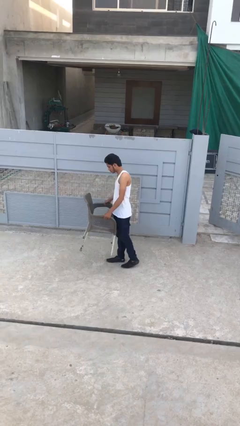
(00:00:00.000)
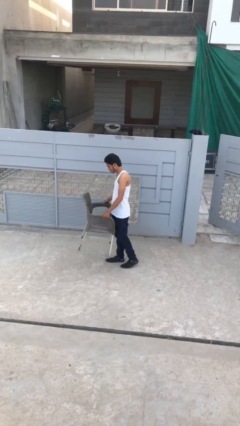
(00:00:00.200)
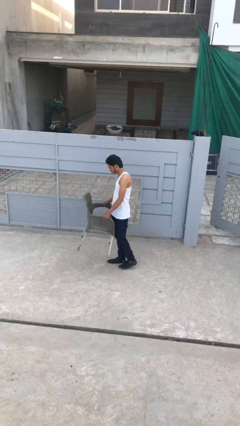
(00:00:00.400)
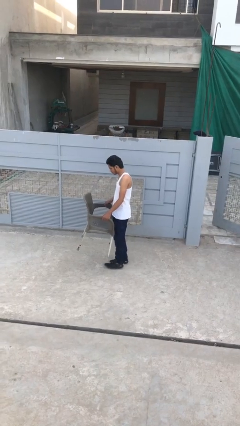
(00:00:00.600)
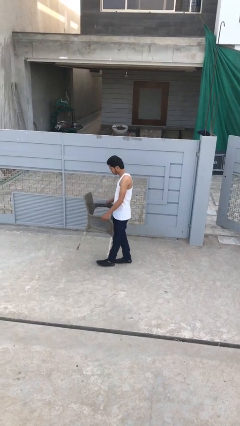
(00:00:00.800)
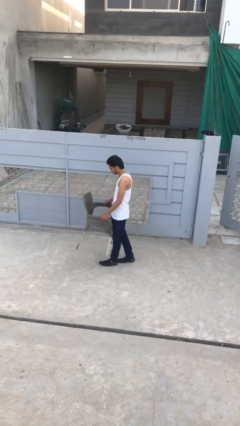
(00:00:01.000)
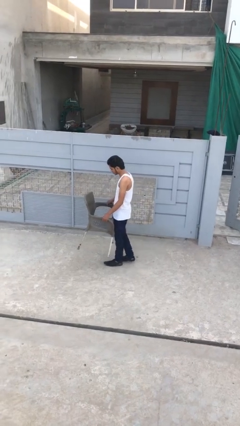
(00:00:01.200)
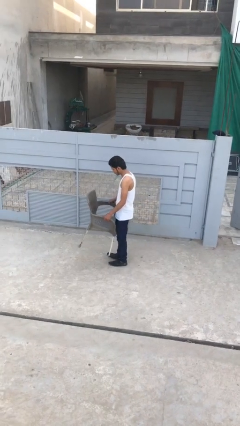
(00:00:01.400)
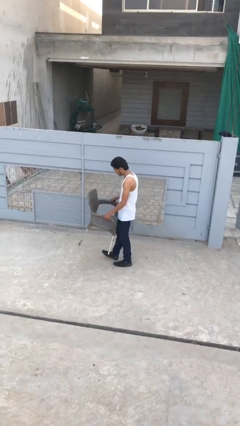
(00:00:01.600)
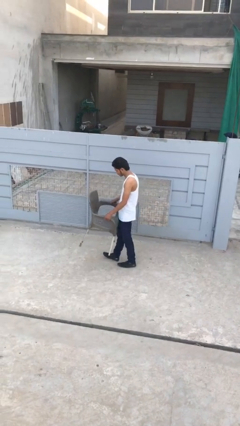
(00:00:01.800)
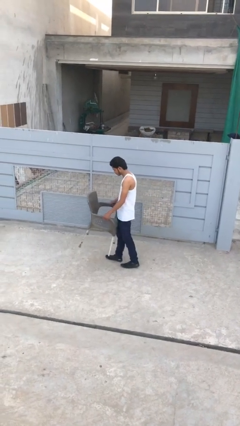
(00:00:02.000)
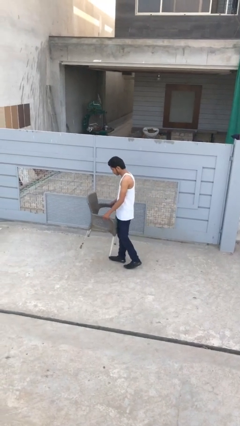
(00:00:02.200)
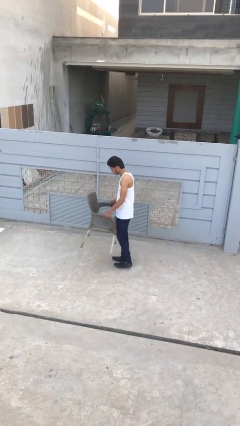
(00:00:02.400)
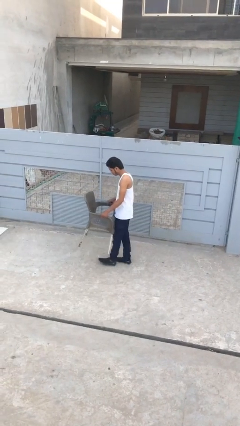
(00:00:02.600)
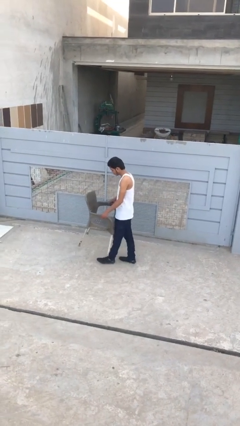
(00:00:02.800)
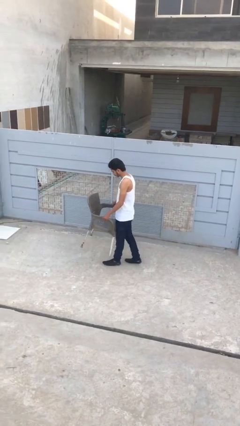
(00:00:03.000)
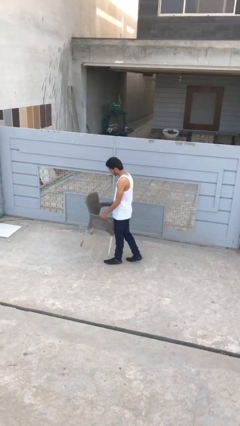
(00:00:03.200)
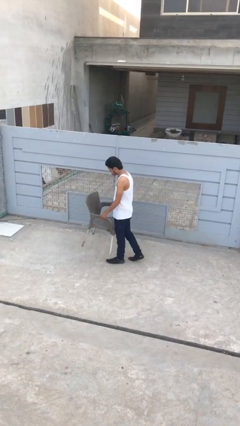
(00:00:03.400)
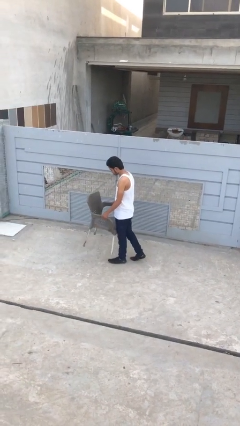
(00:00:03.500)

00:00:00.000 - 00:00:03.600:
person carries heavy object

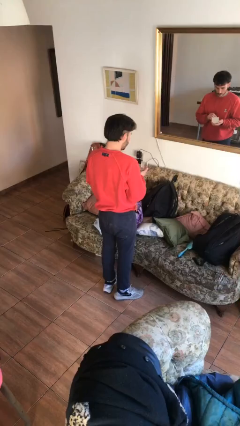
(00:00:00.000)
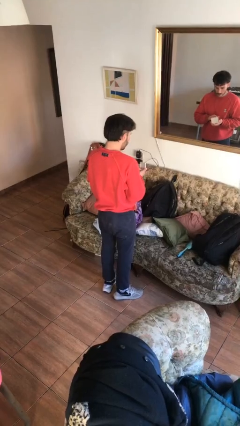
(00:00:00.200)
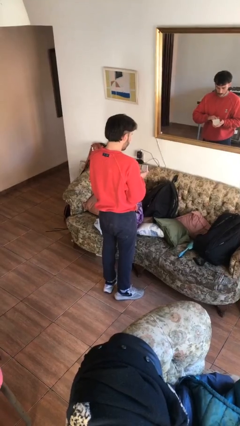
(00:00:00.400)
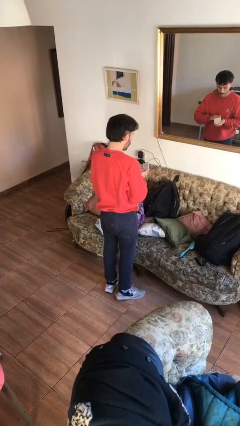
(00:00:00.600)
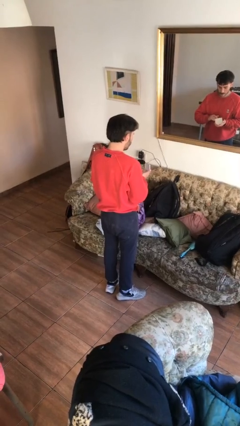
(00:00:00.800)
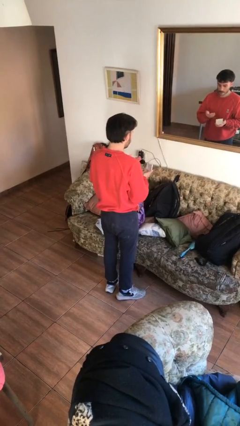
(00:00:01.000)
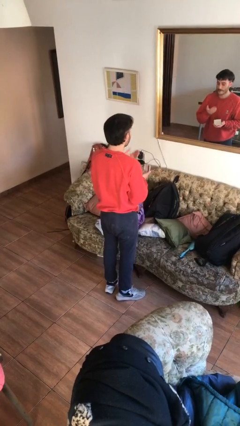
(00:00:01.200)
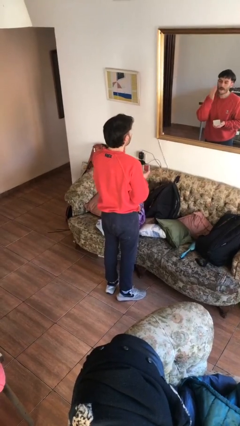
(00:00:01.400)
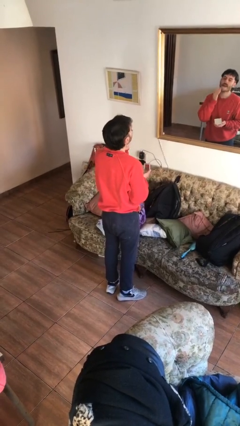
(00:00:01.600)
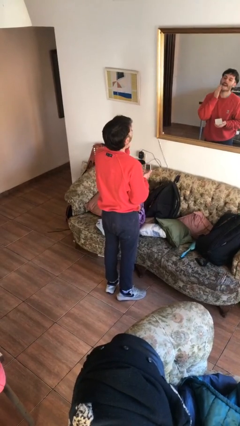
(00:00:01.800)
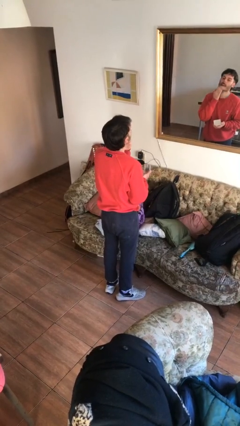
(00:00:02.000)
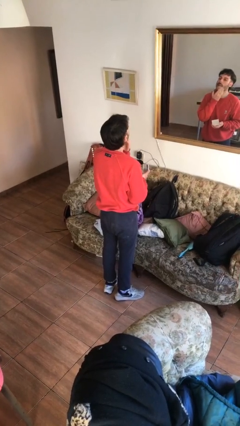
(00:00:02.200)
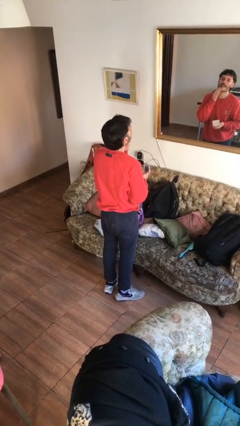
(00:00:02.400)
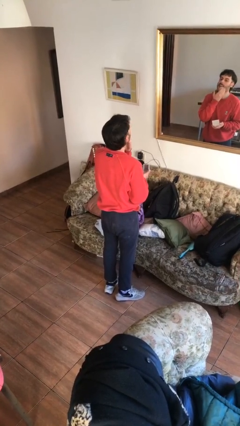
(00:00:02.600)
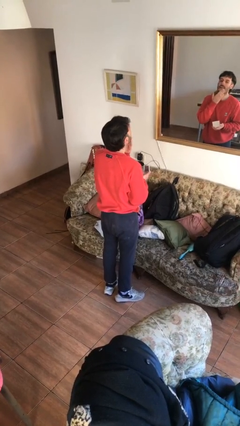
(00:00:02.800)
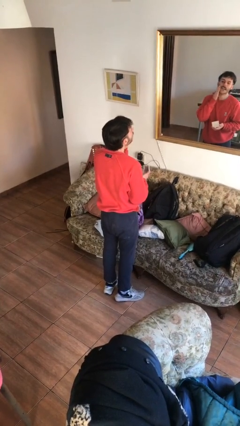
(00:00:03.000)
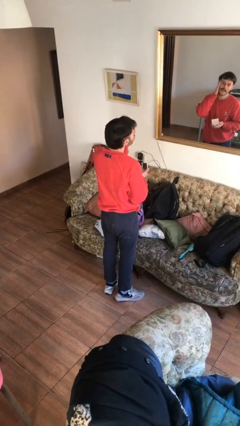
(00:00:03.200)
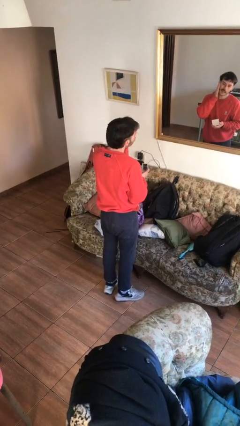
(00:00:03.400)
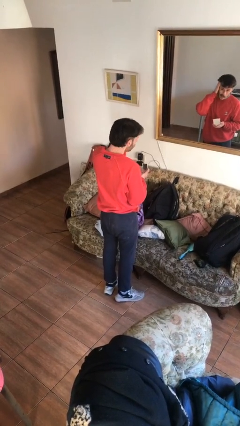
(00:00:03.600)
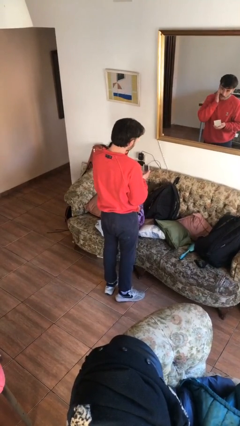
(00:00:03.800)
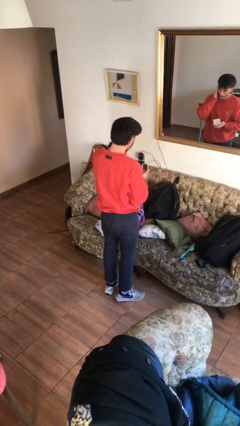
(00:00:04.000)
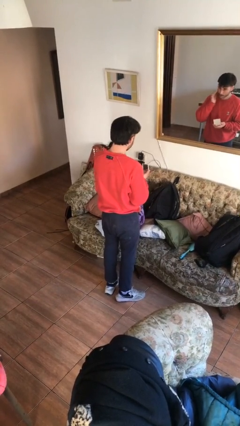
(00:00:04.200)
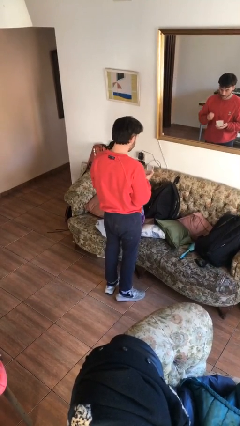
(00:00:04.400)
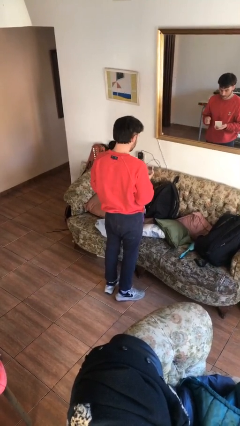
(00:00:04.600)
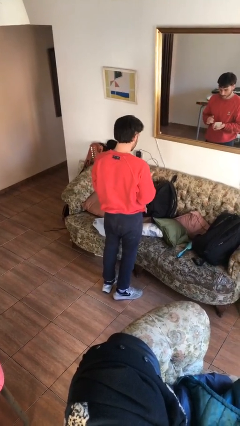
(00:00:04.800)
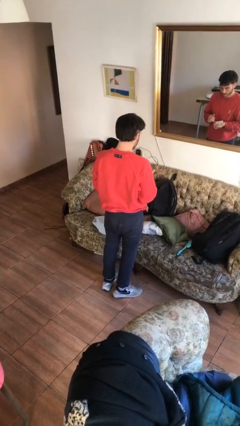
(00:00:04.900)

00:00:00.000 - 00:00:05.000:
person applies foundation makeup

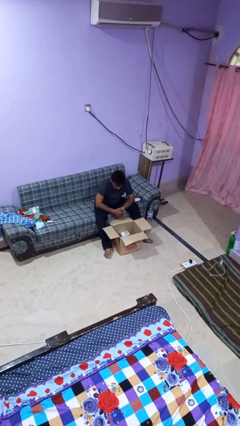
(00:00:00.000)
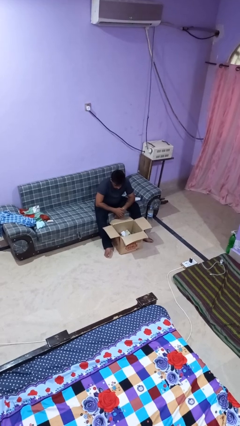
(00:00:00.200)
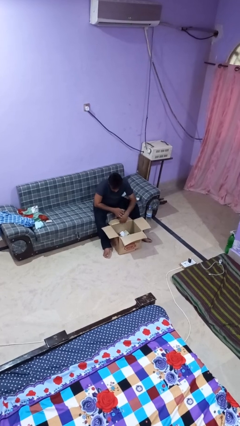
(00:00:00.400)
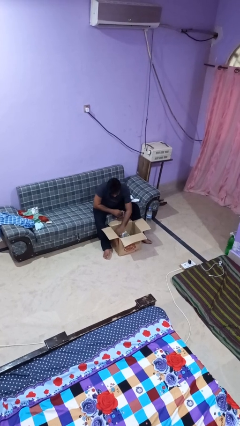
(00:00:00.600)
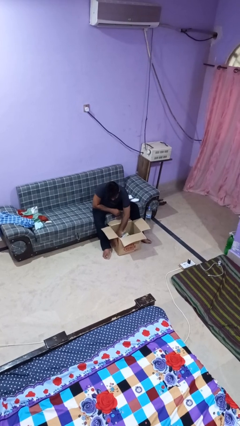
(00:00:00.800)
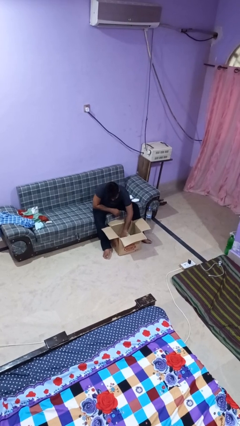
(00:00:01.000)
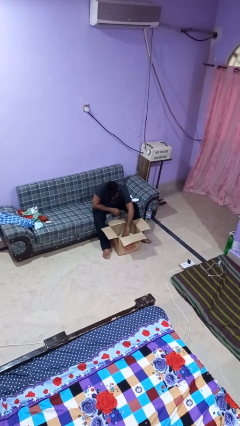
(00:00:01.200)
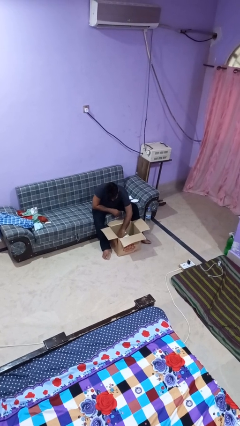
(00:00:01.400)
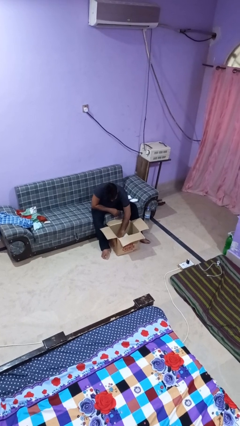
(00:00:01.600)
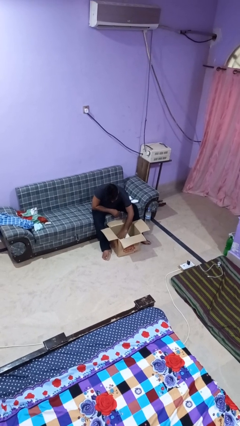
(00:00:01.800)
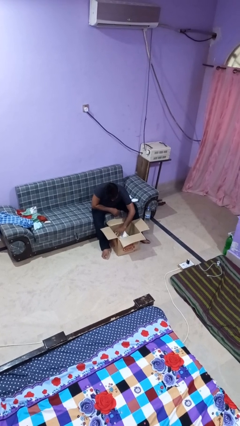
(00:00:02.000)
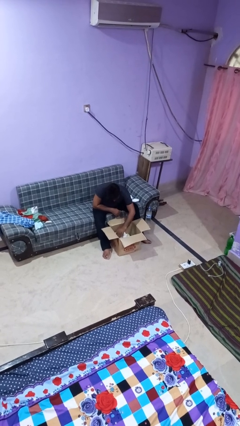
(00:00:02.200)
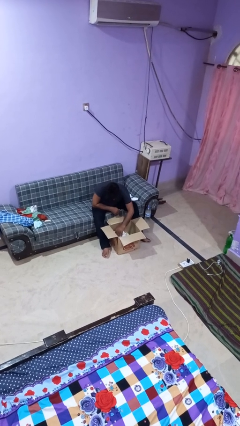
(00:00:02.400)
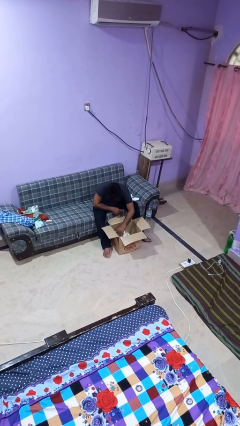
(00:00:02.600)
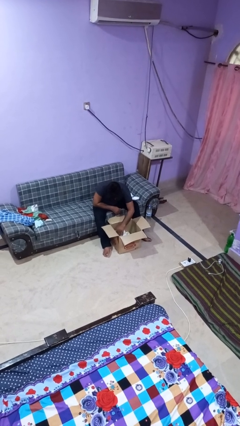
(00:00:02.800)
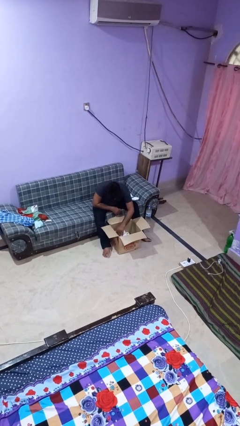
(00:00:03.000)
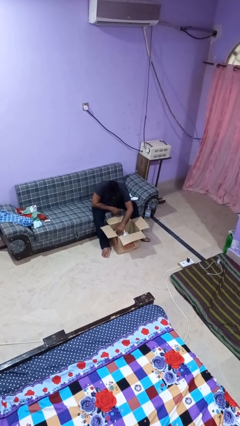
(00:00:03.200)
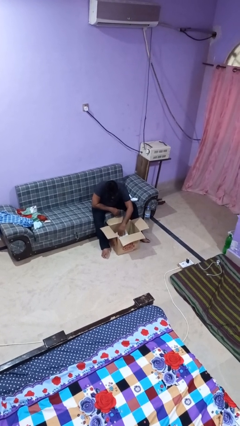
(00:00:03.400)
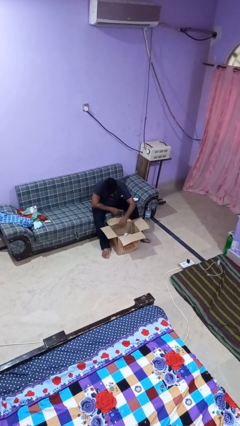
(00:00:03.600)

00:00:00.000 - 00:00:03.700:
person searches in box

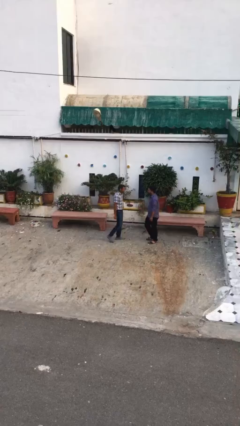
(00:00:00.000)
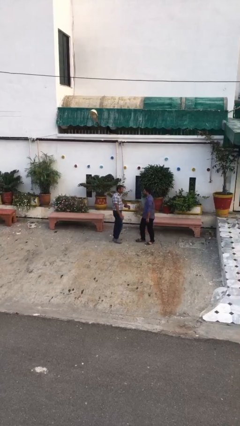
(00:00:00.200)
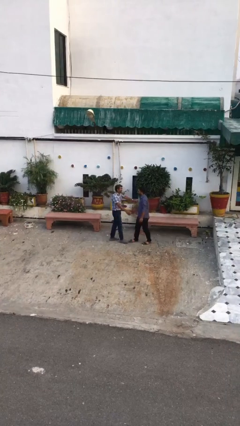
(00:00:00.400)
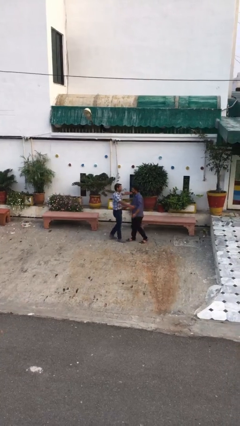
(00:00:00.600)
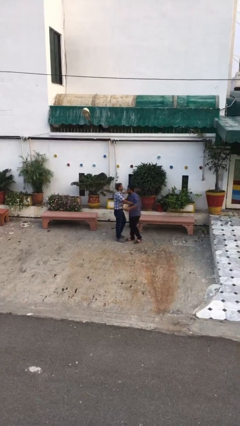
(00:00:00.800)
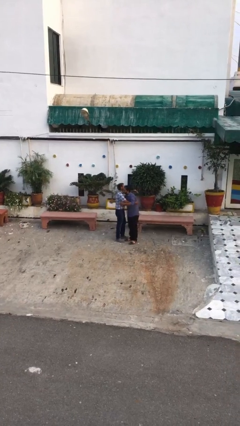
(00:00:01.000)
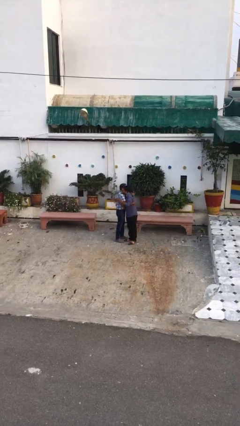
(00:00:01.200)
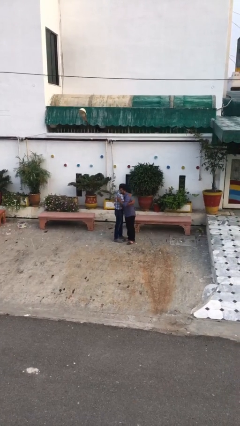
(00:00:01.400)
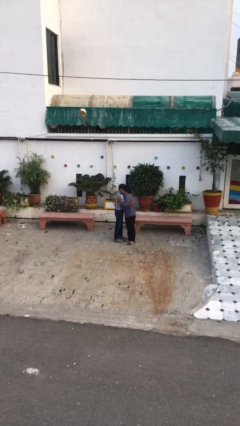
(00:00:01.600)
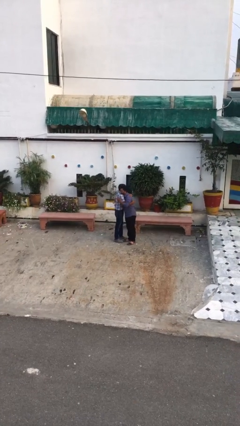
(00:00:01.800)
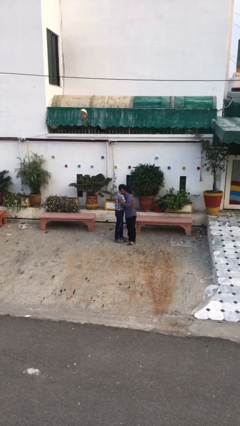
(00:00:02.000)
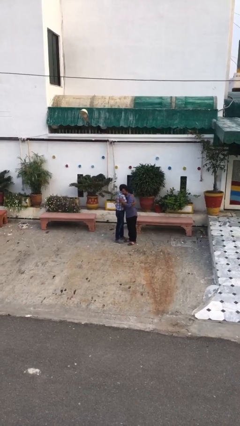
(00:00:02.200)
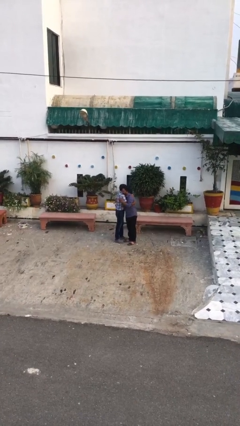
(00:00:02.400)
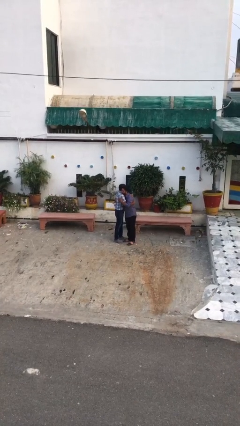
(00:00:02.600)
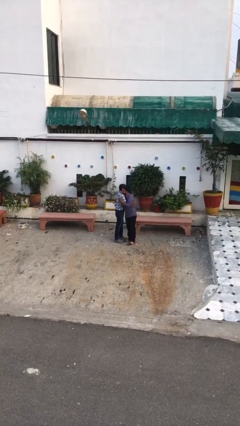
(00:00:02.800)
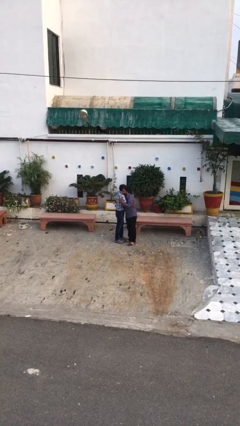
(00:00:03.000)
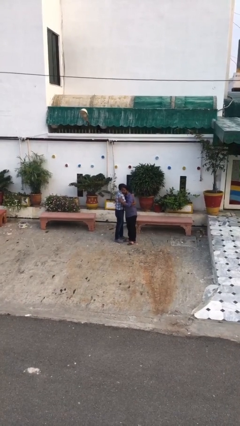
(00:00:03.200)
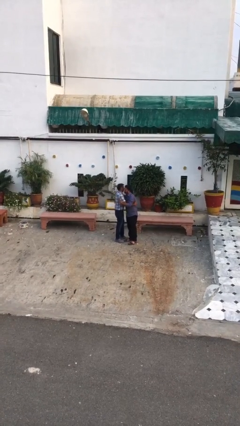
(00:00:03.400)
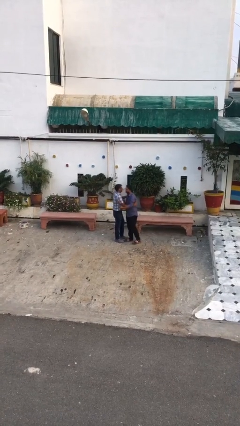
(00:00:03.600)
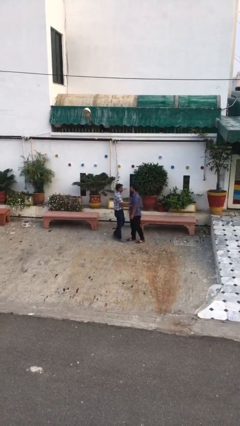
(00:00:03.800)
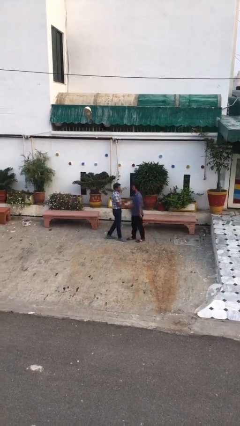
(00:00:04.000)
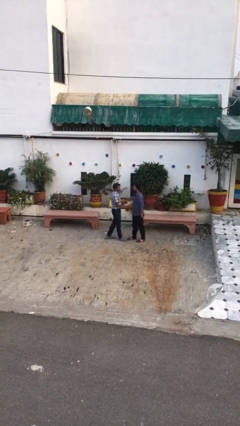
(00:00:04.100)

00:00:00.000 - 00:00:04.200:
person embraces person

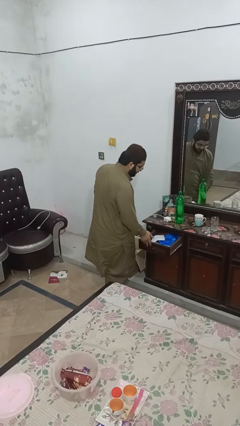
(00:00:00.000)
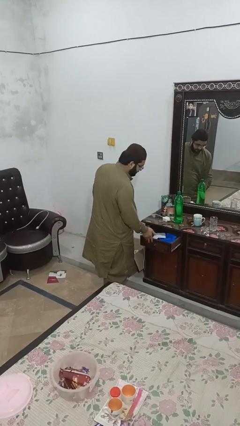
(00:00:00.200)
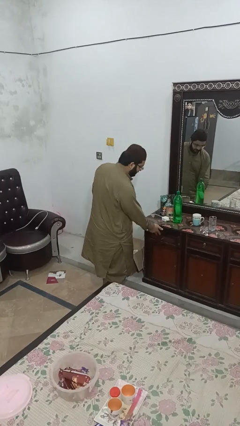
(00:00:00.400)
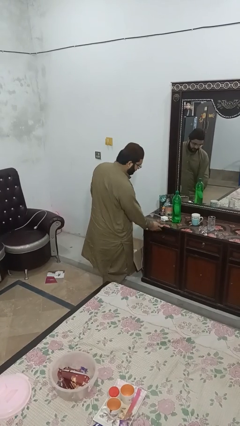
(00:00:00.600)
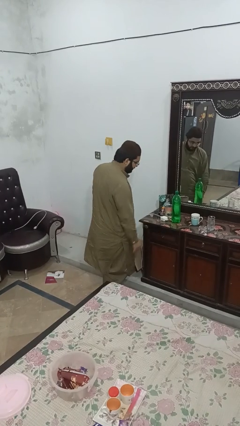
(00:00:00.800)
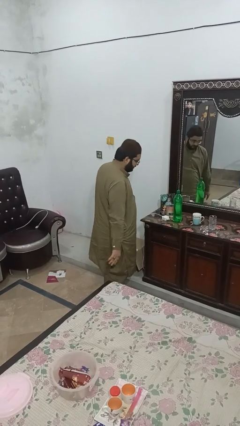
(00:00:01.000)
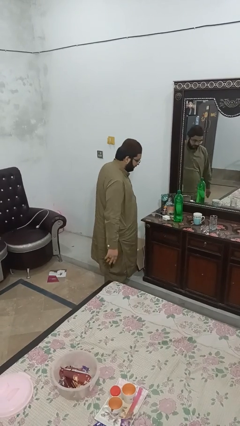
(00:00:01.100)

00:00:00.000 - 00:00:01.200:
person closes dresser drawer
